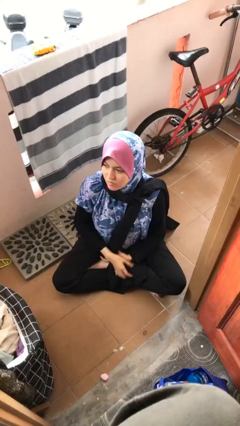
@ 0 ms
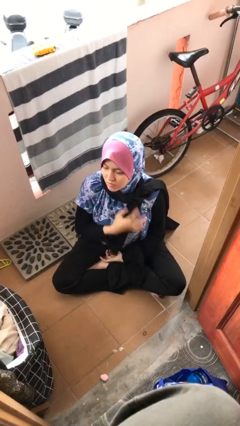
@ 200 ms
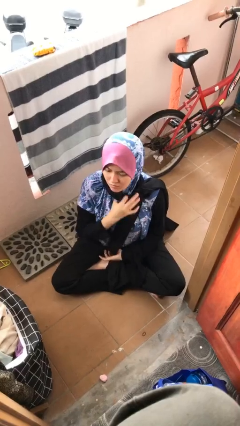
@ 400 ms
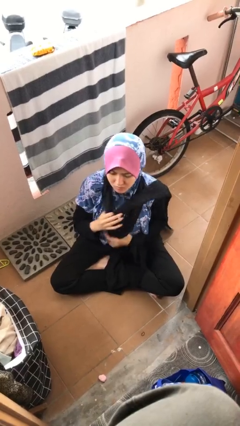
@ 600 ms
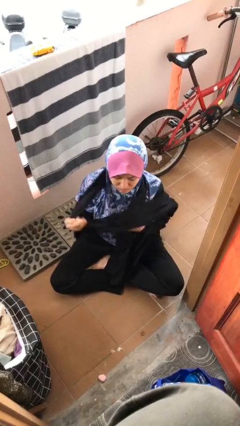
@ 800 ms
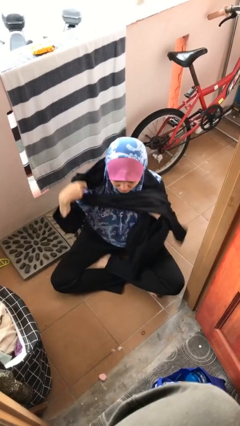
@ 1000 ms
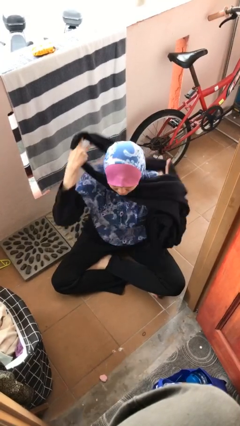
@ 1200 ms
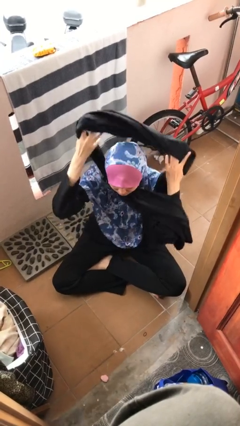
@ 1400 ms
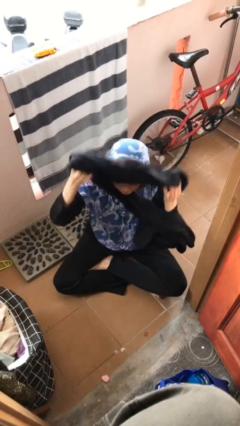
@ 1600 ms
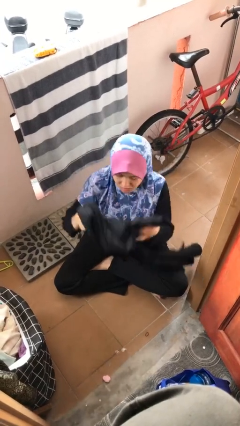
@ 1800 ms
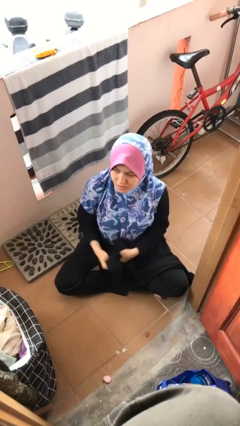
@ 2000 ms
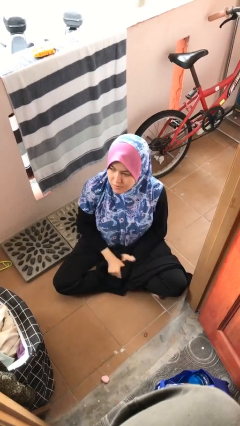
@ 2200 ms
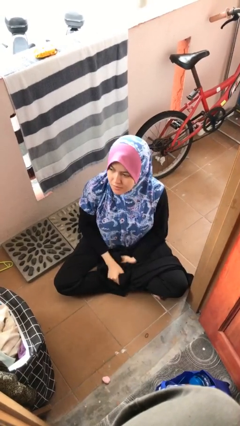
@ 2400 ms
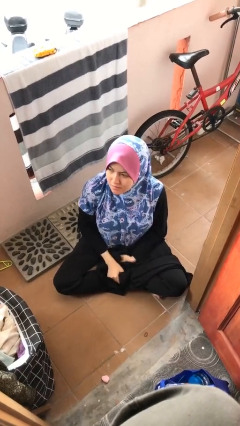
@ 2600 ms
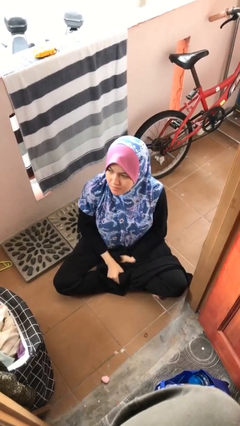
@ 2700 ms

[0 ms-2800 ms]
person takes off scarf

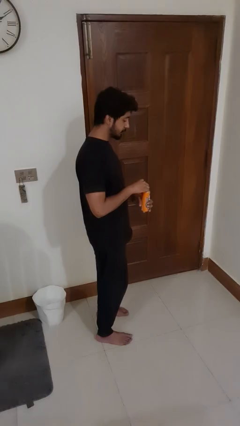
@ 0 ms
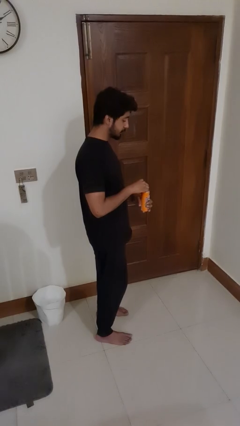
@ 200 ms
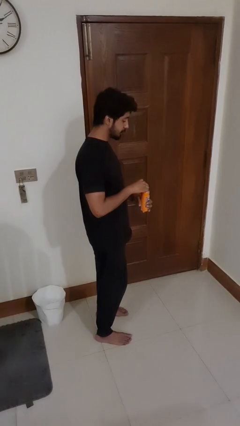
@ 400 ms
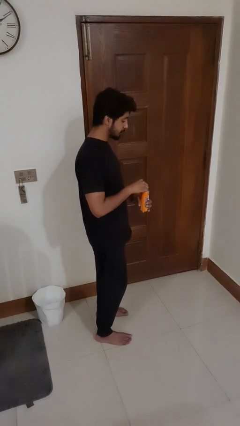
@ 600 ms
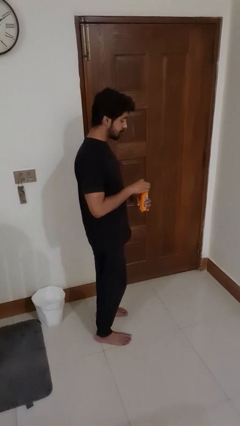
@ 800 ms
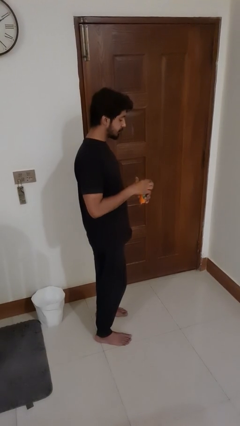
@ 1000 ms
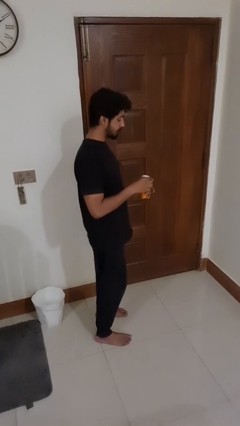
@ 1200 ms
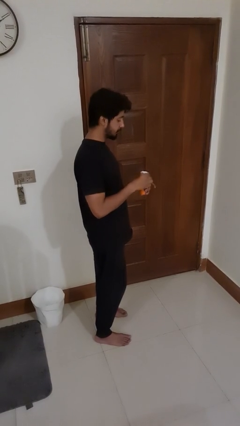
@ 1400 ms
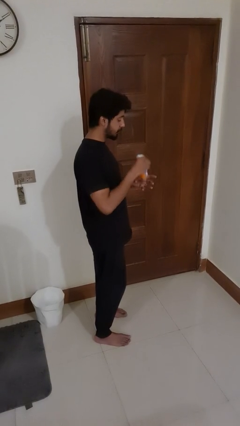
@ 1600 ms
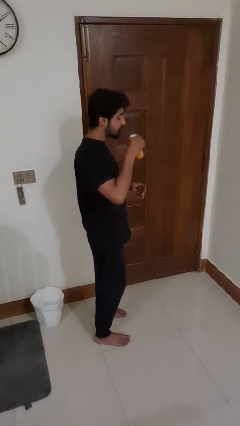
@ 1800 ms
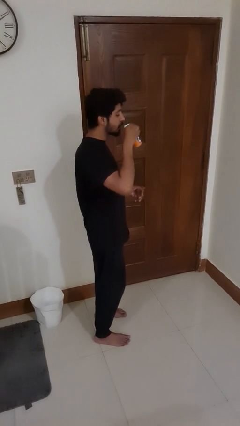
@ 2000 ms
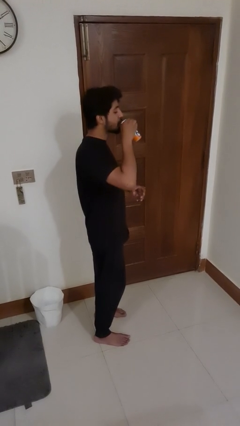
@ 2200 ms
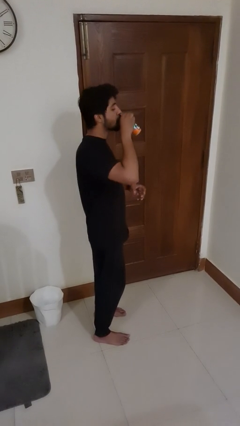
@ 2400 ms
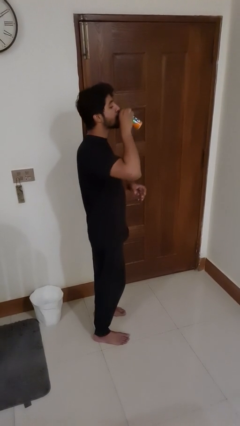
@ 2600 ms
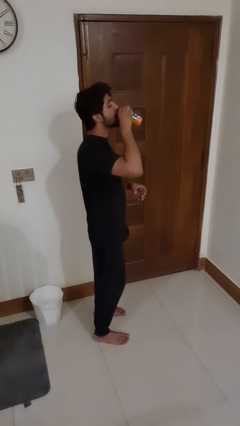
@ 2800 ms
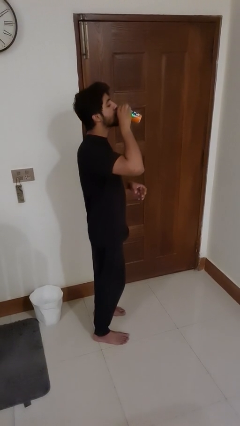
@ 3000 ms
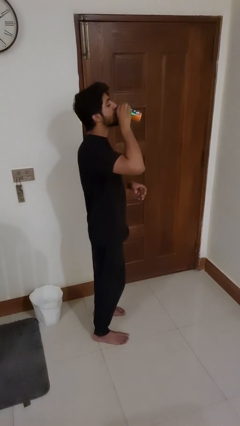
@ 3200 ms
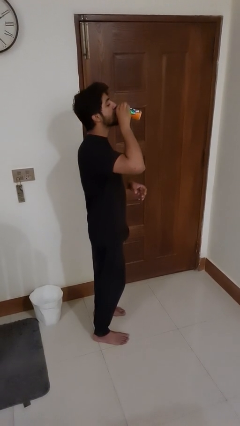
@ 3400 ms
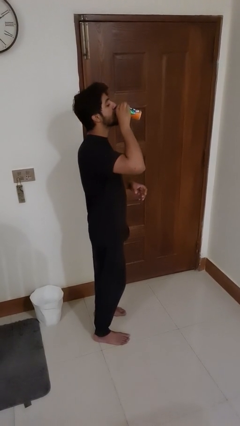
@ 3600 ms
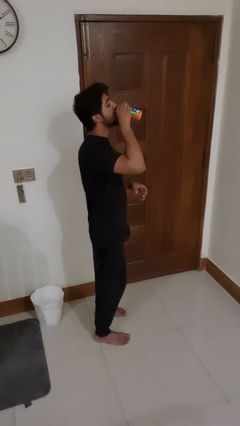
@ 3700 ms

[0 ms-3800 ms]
person drinks from beverage can

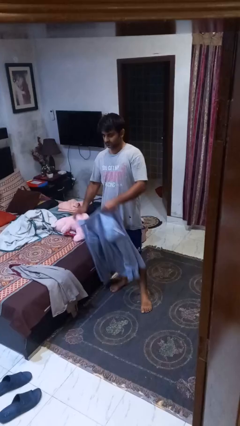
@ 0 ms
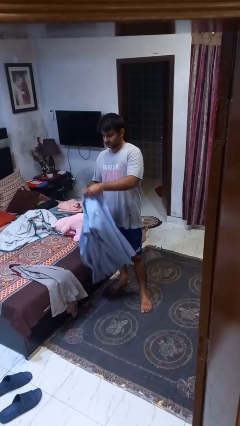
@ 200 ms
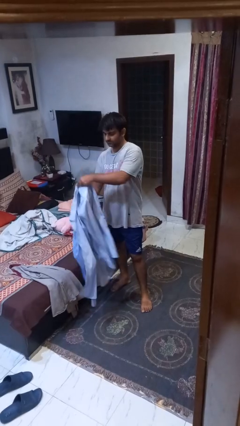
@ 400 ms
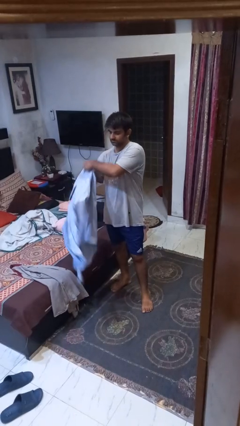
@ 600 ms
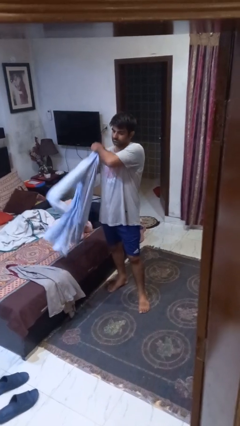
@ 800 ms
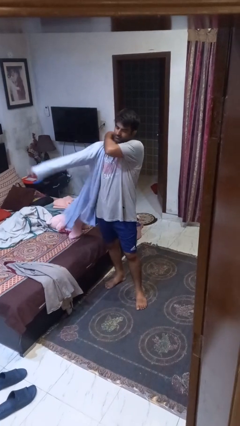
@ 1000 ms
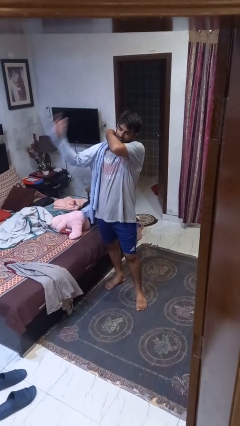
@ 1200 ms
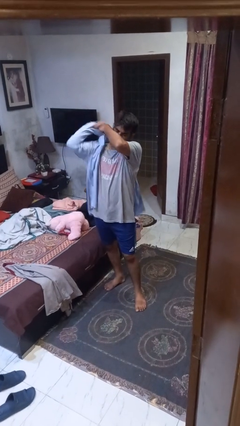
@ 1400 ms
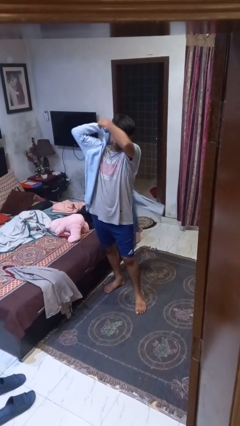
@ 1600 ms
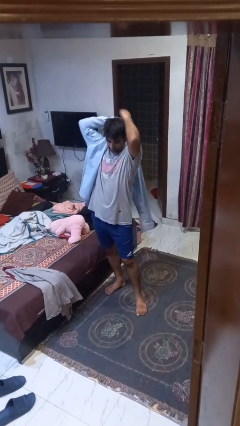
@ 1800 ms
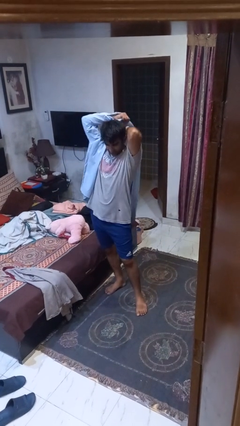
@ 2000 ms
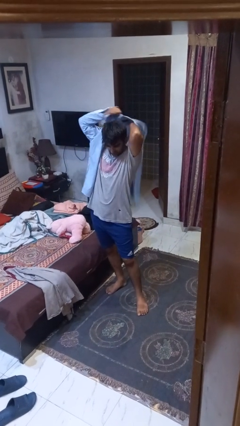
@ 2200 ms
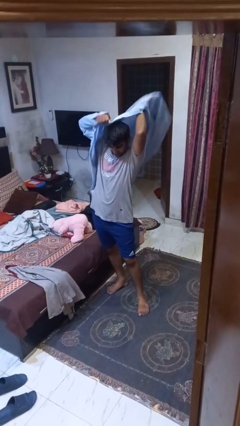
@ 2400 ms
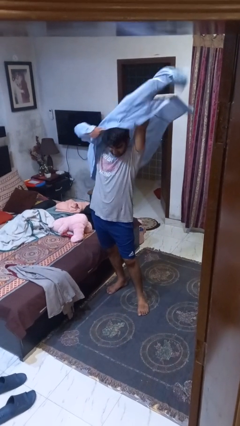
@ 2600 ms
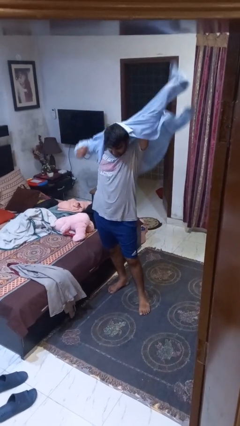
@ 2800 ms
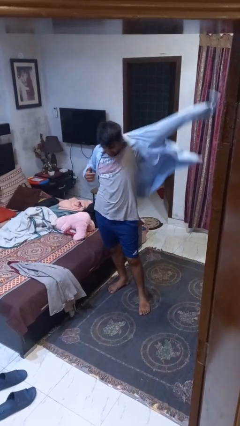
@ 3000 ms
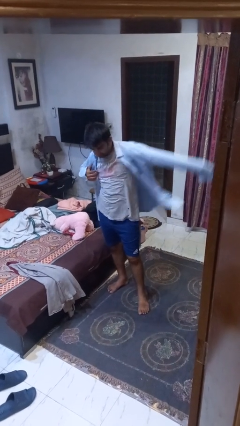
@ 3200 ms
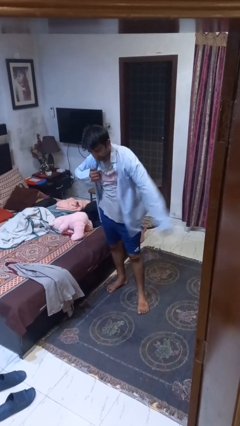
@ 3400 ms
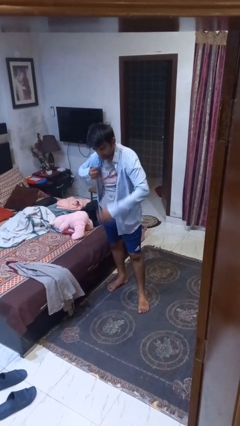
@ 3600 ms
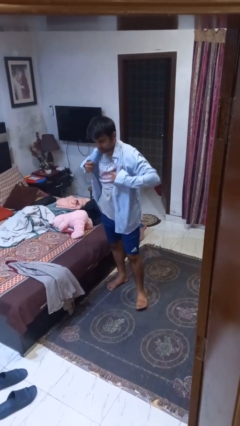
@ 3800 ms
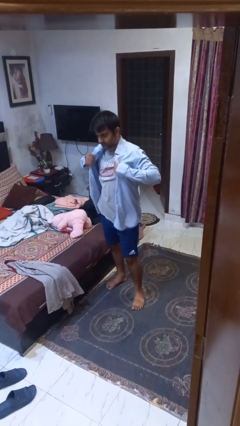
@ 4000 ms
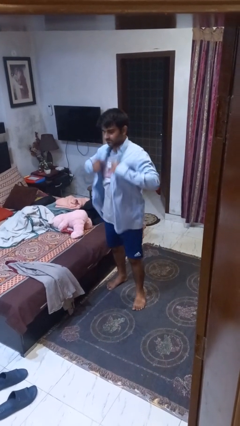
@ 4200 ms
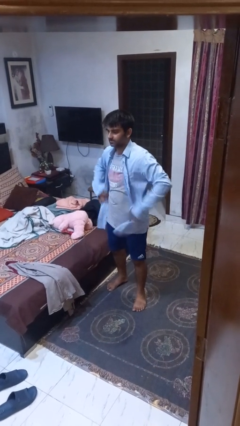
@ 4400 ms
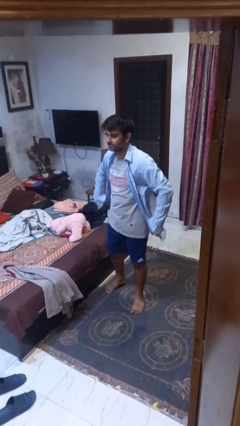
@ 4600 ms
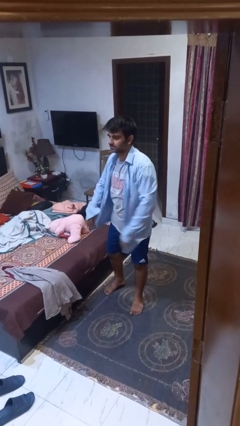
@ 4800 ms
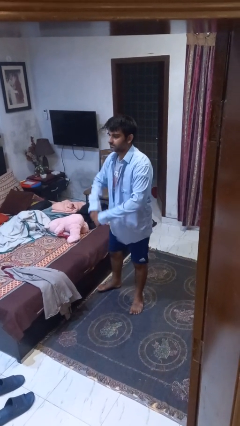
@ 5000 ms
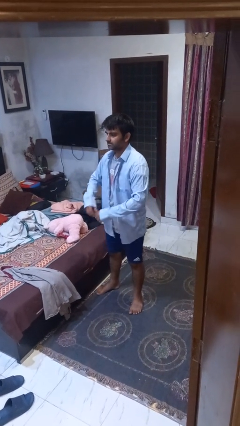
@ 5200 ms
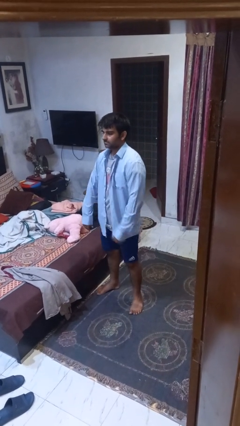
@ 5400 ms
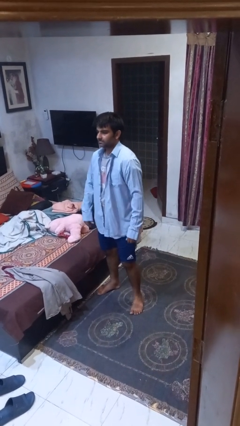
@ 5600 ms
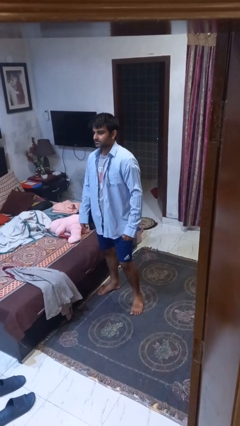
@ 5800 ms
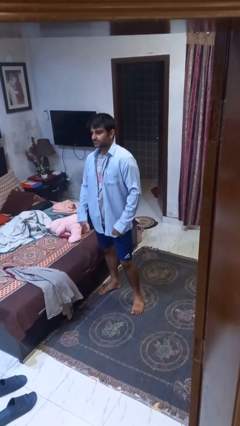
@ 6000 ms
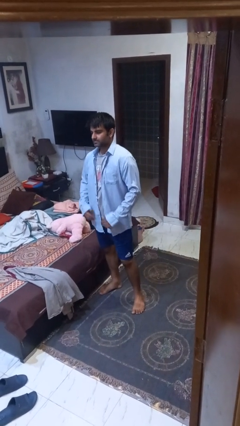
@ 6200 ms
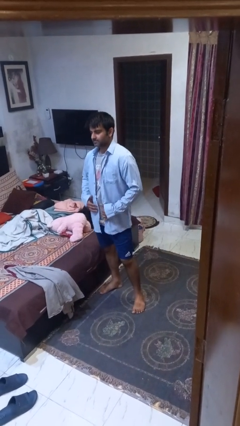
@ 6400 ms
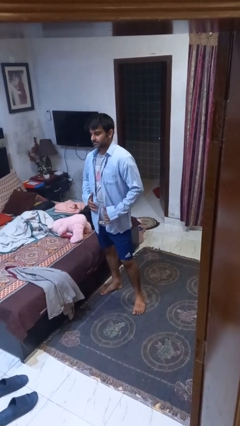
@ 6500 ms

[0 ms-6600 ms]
person puts on shirt

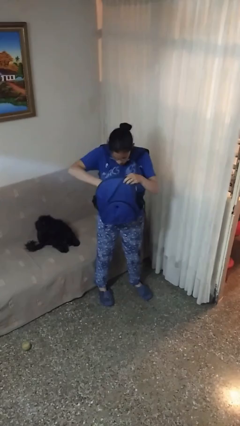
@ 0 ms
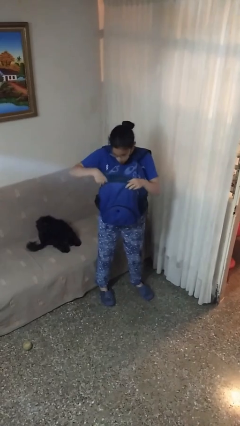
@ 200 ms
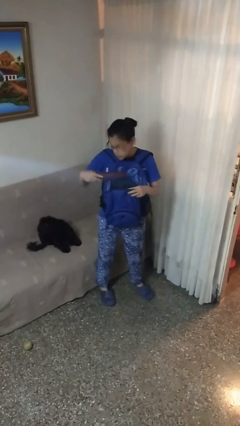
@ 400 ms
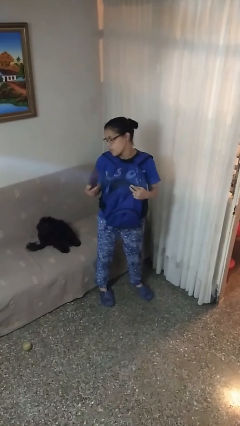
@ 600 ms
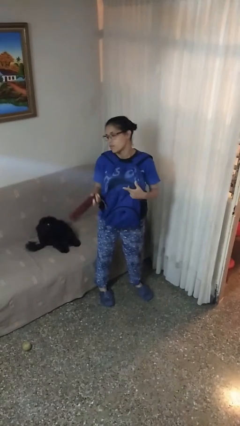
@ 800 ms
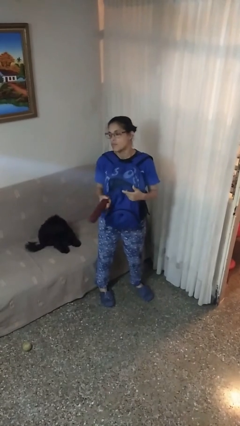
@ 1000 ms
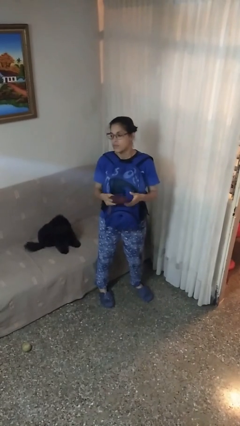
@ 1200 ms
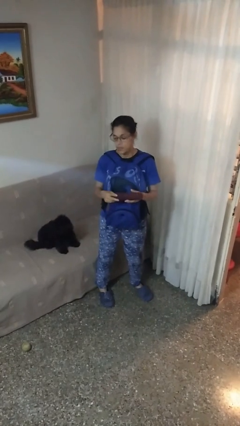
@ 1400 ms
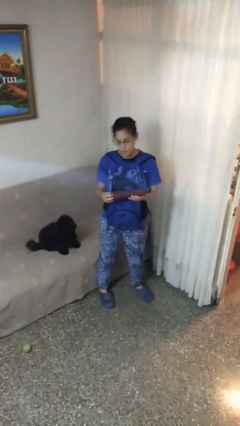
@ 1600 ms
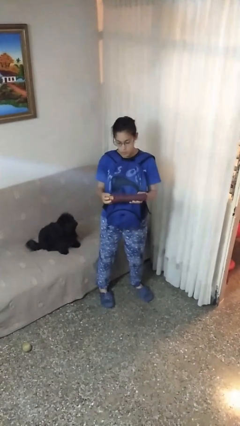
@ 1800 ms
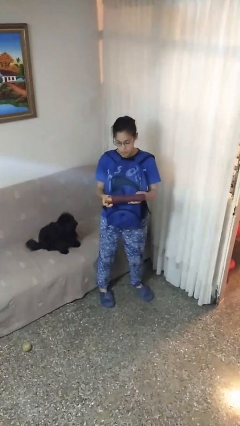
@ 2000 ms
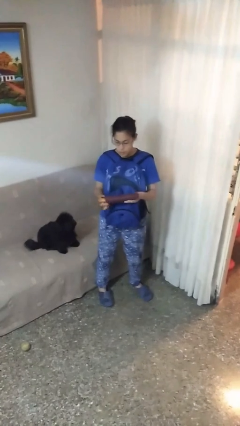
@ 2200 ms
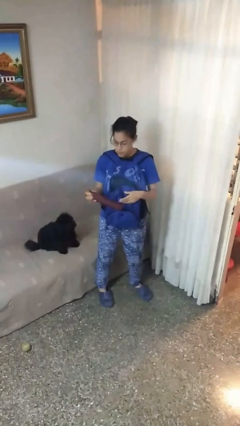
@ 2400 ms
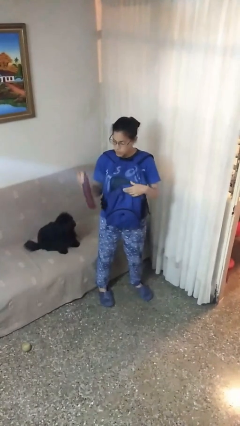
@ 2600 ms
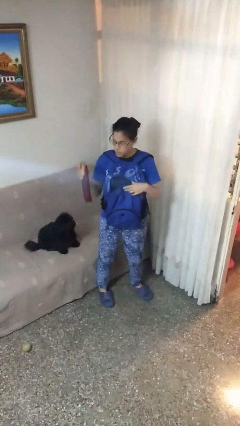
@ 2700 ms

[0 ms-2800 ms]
person takes object from backpack

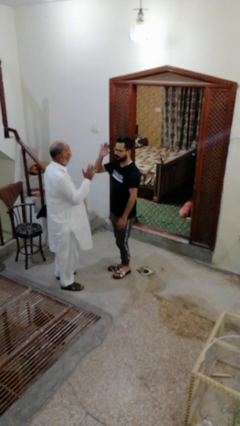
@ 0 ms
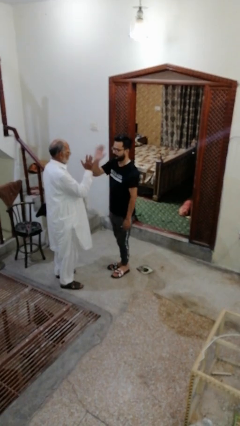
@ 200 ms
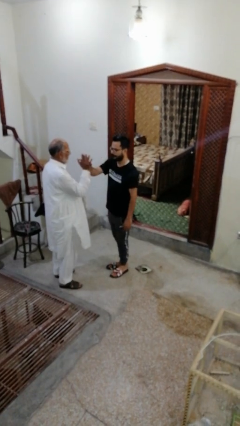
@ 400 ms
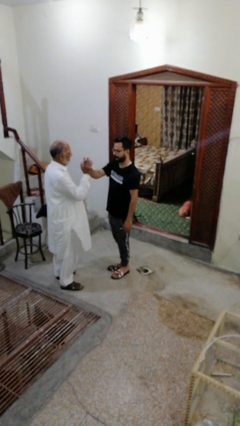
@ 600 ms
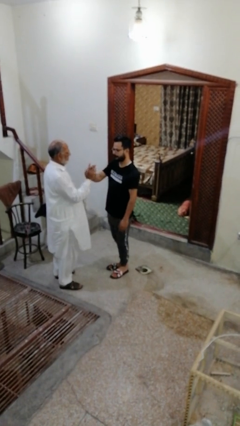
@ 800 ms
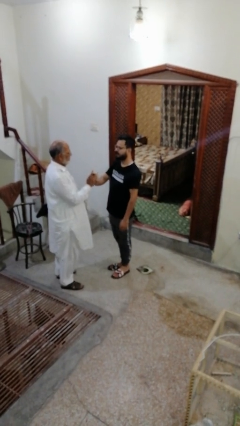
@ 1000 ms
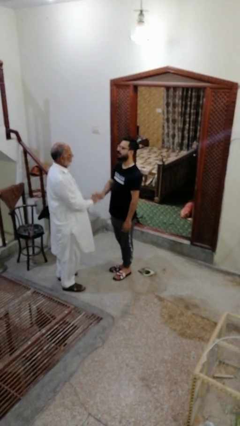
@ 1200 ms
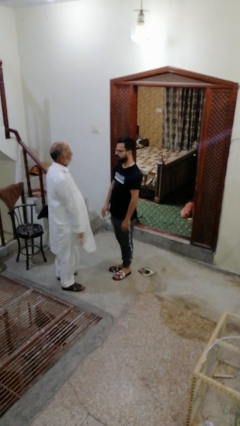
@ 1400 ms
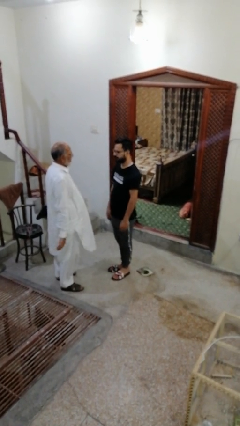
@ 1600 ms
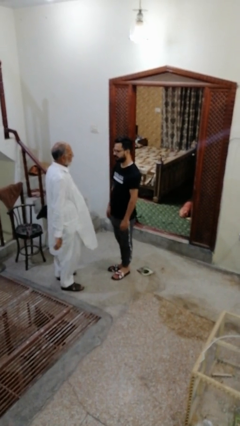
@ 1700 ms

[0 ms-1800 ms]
person highfives hand
